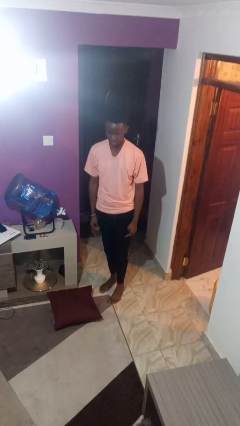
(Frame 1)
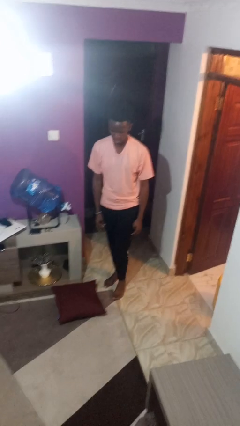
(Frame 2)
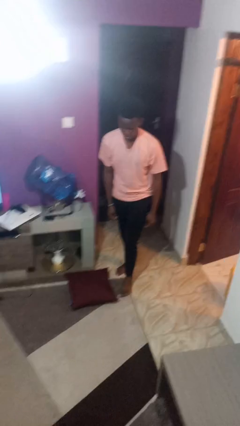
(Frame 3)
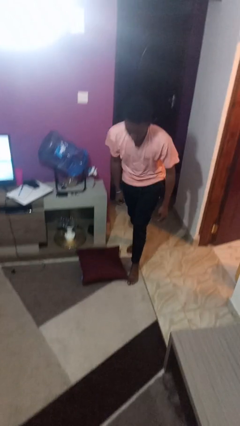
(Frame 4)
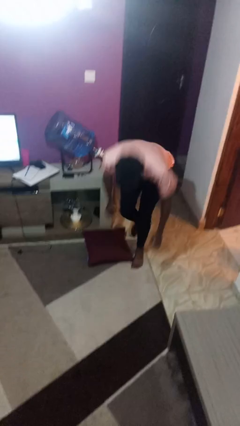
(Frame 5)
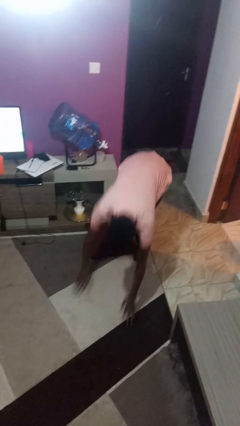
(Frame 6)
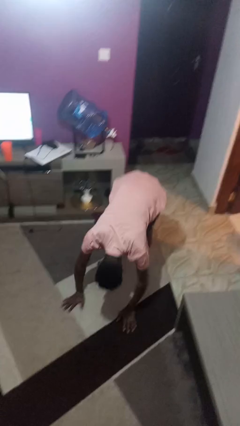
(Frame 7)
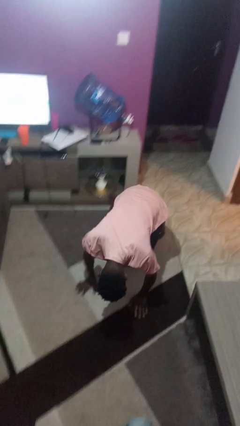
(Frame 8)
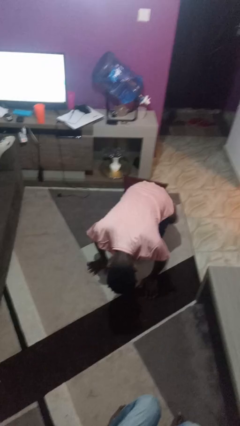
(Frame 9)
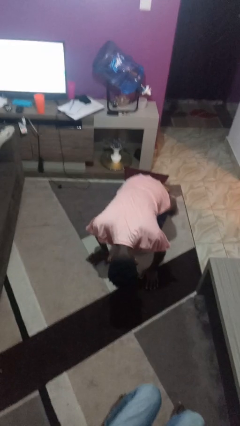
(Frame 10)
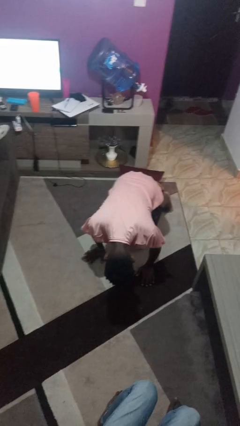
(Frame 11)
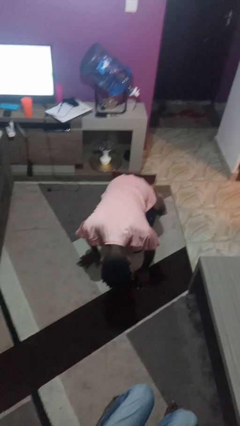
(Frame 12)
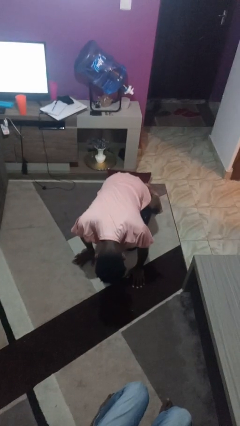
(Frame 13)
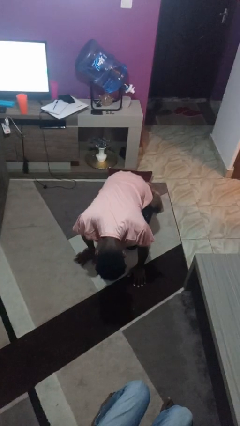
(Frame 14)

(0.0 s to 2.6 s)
person trips on object on floor

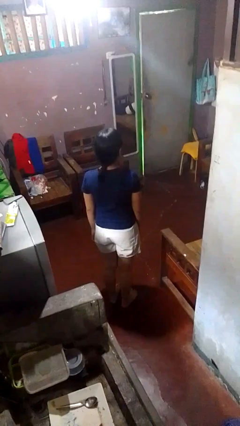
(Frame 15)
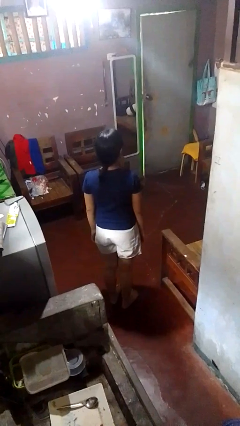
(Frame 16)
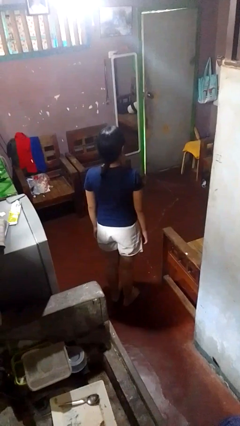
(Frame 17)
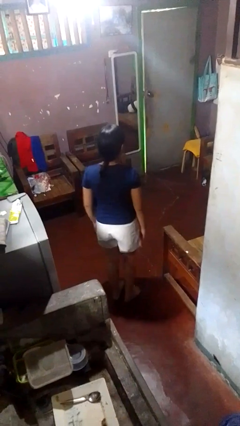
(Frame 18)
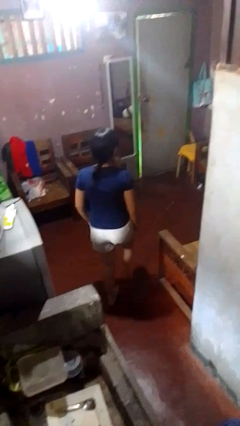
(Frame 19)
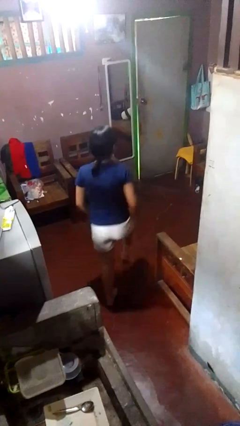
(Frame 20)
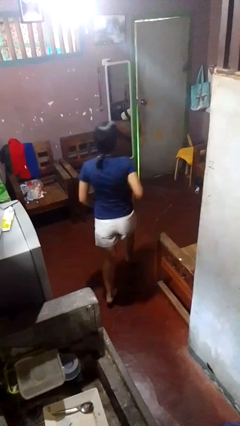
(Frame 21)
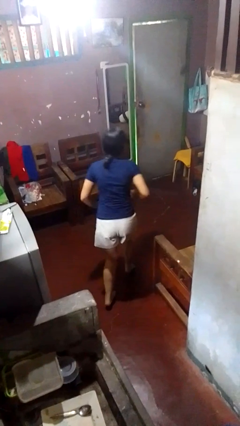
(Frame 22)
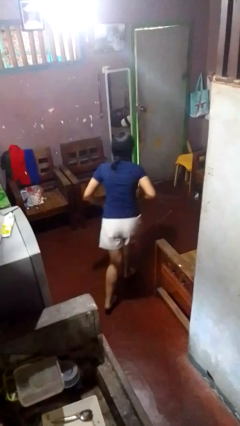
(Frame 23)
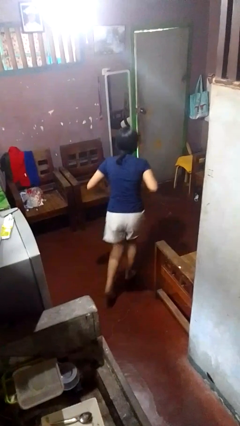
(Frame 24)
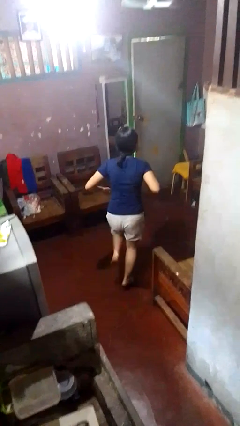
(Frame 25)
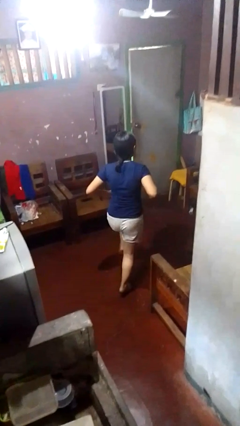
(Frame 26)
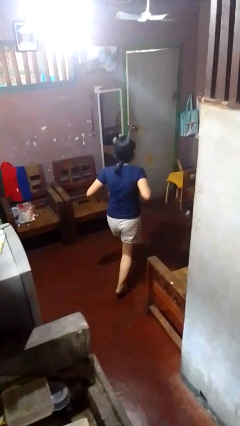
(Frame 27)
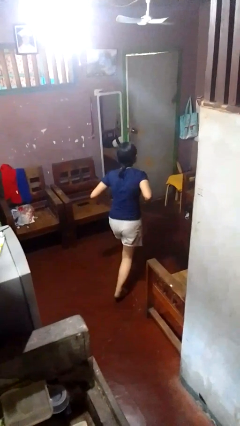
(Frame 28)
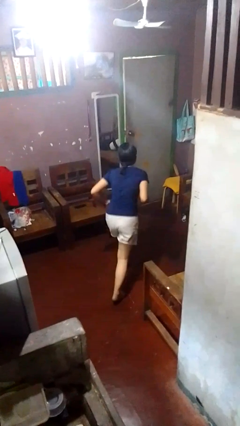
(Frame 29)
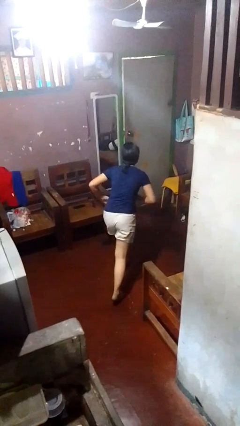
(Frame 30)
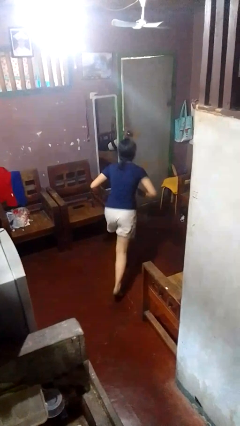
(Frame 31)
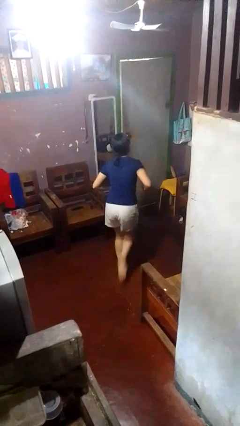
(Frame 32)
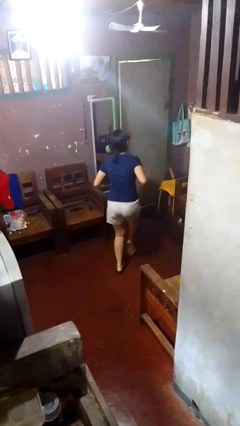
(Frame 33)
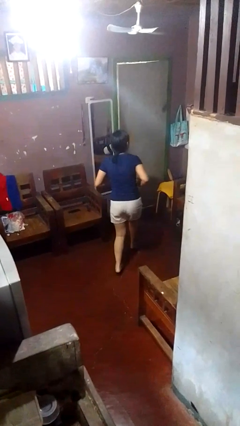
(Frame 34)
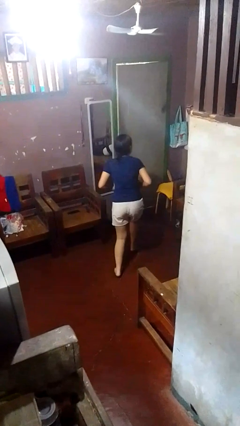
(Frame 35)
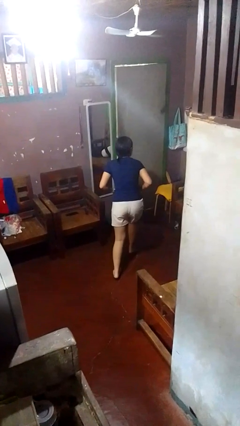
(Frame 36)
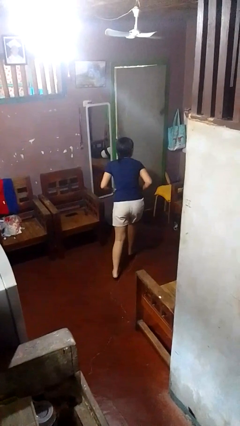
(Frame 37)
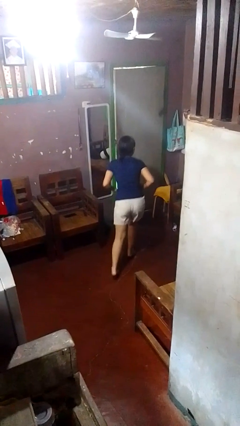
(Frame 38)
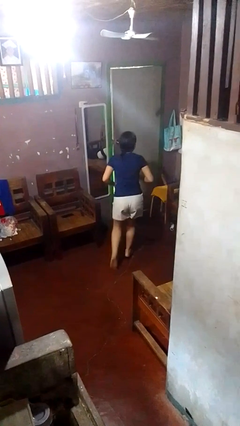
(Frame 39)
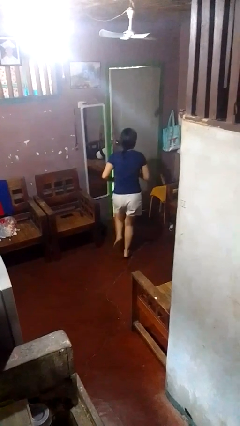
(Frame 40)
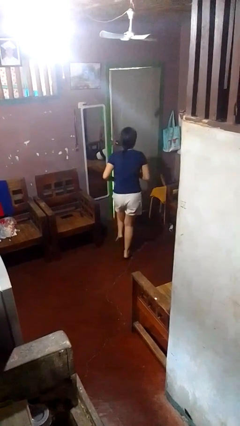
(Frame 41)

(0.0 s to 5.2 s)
person walks tiptoe

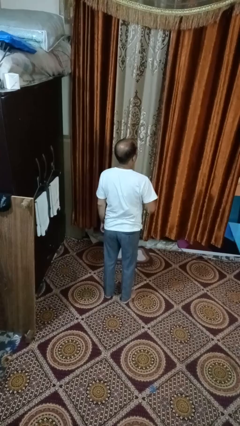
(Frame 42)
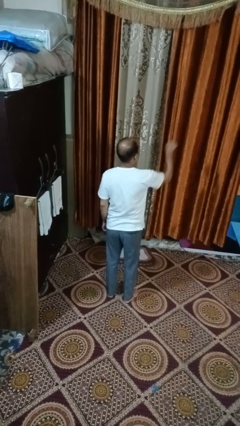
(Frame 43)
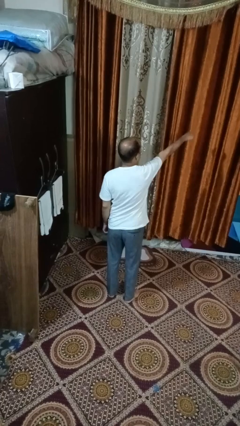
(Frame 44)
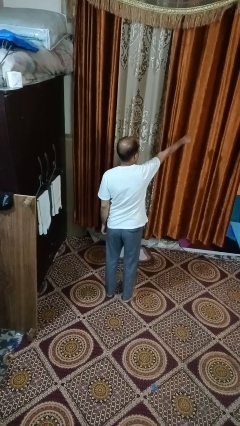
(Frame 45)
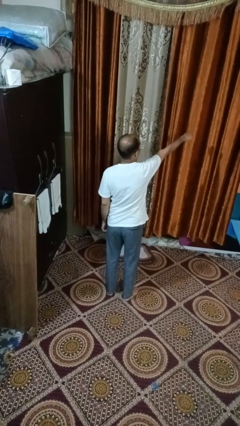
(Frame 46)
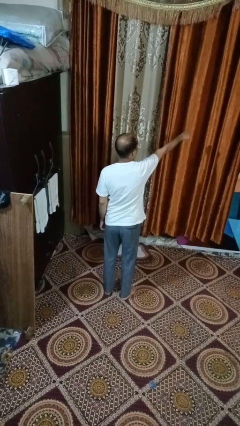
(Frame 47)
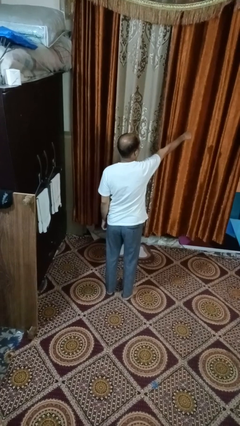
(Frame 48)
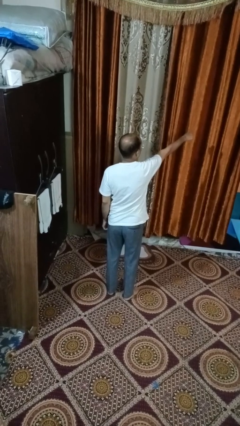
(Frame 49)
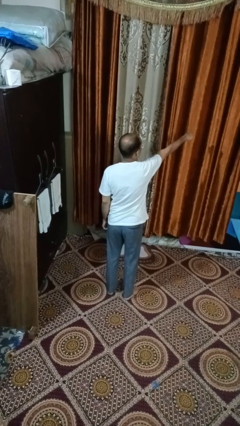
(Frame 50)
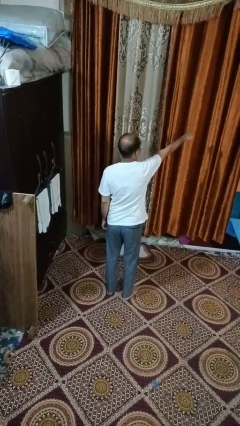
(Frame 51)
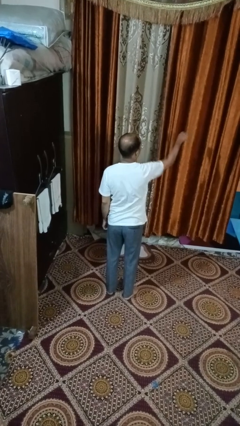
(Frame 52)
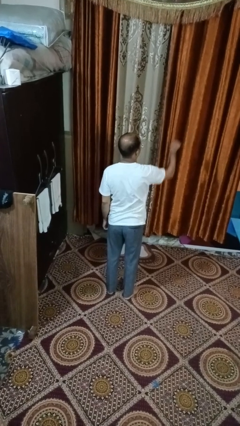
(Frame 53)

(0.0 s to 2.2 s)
person punches

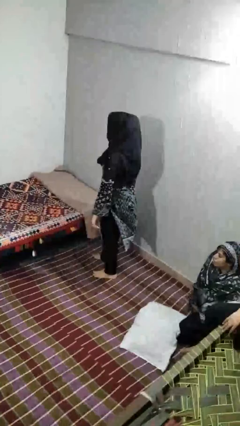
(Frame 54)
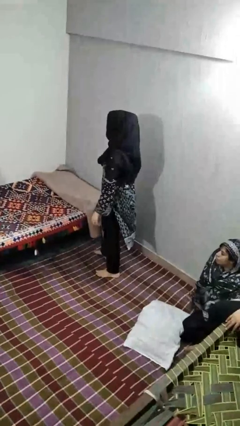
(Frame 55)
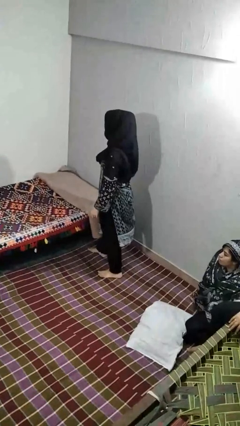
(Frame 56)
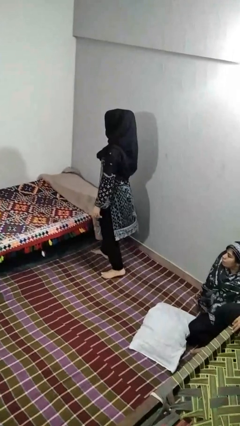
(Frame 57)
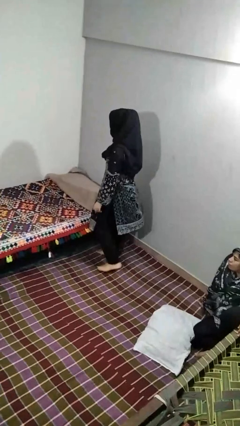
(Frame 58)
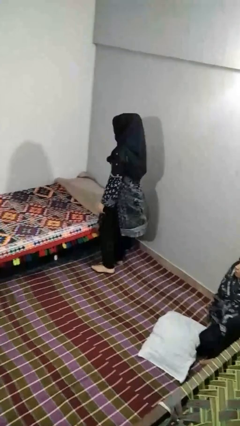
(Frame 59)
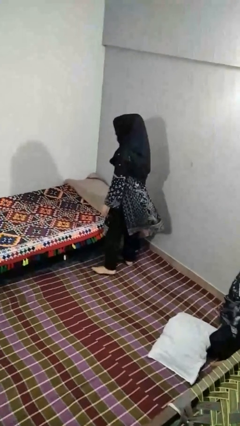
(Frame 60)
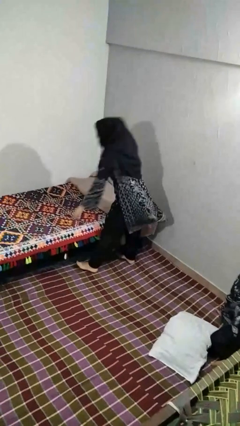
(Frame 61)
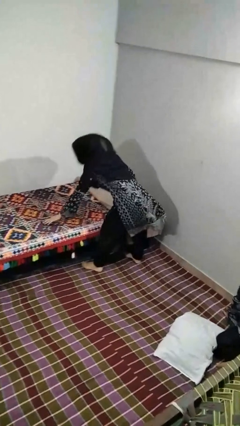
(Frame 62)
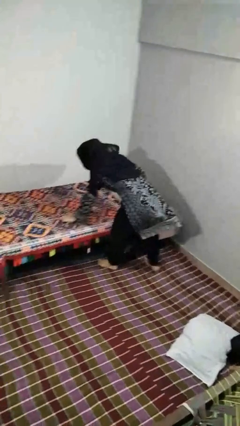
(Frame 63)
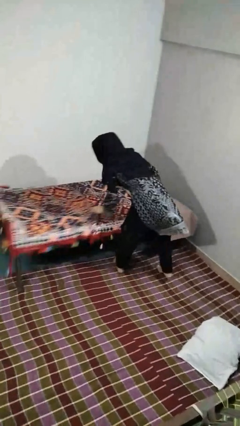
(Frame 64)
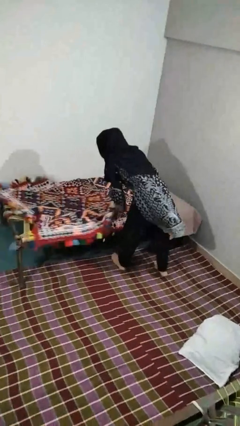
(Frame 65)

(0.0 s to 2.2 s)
person makes bed

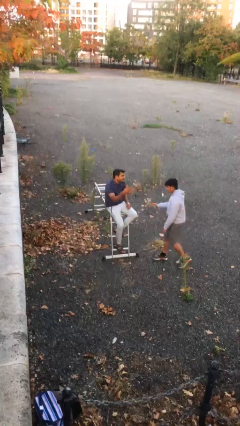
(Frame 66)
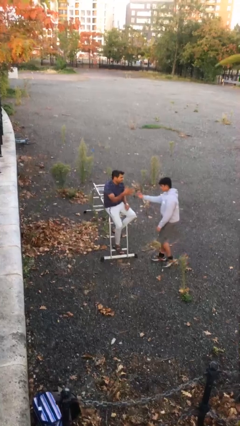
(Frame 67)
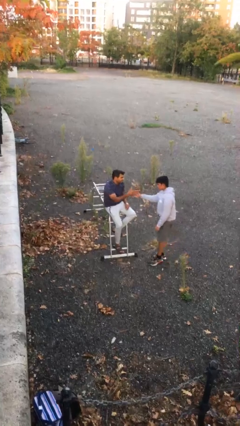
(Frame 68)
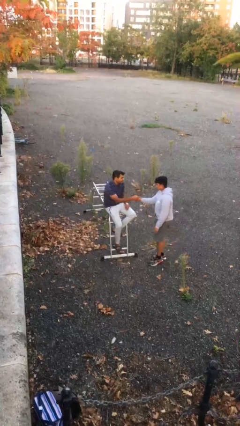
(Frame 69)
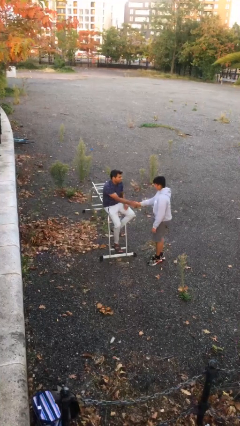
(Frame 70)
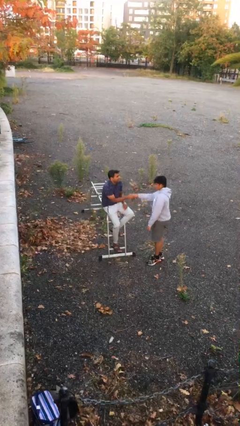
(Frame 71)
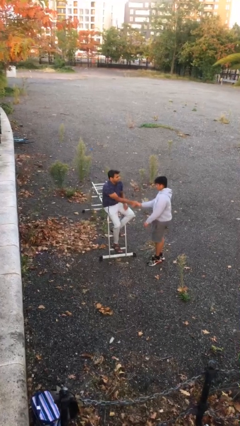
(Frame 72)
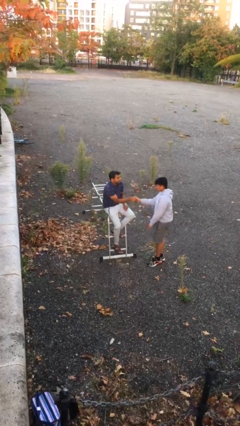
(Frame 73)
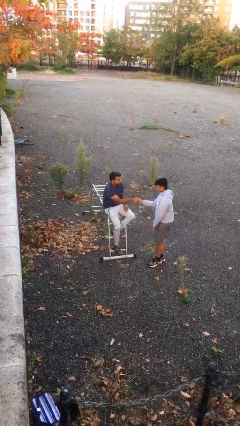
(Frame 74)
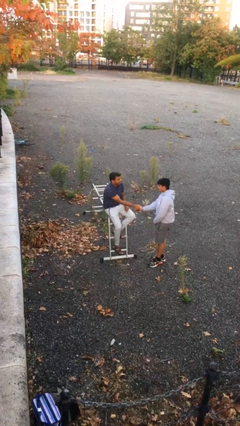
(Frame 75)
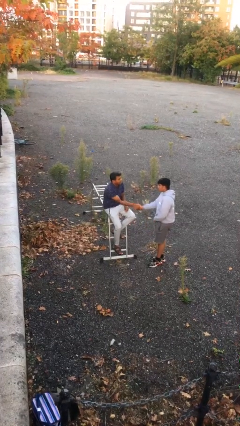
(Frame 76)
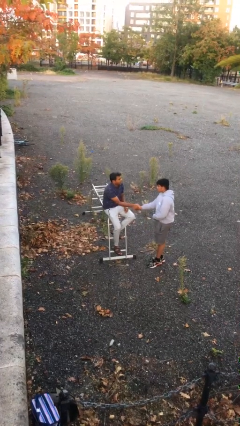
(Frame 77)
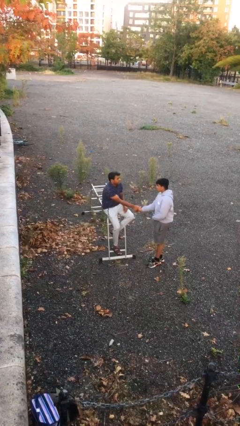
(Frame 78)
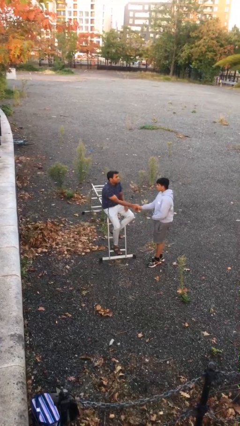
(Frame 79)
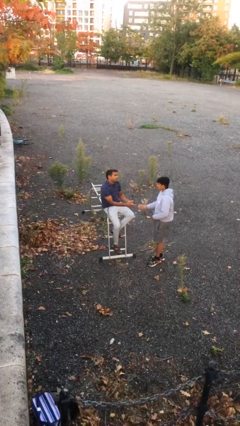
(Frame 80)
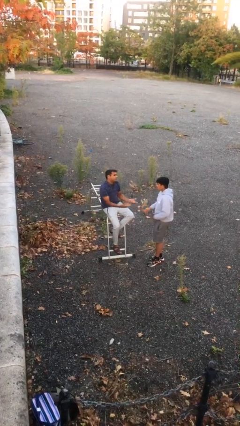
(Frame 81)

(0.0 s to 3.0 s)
person shakes hand

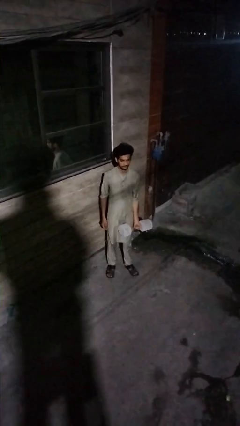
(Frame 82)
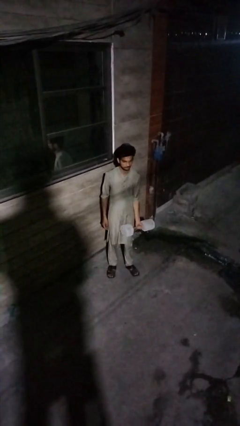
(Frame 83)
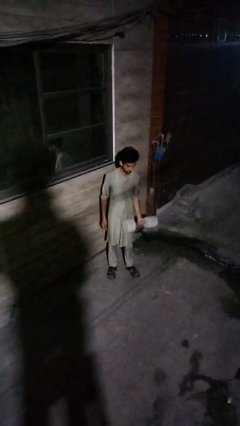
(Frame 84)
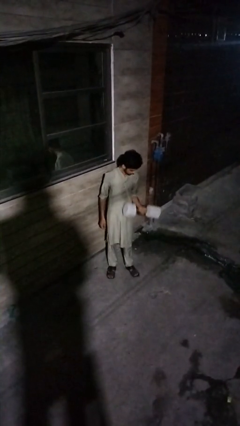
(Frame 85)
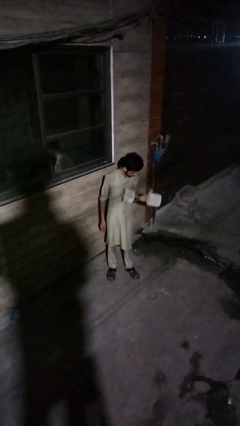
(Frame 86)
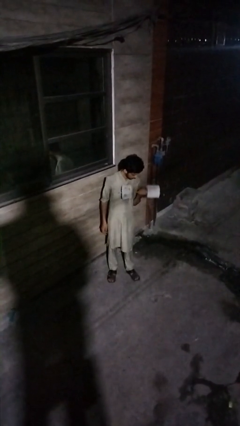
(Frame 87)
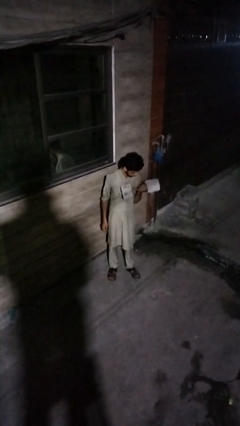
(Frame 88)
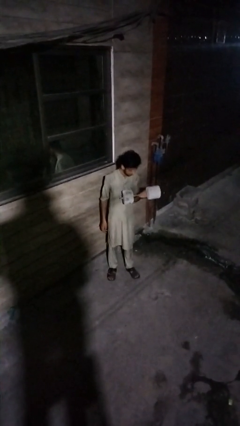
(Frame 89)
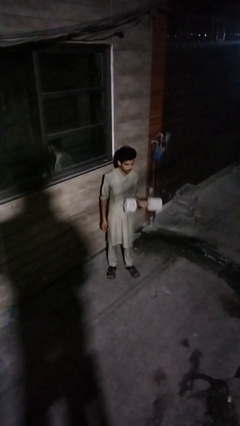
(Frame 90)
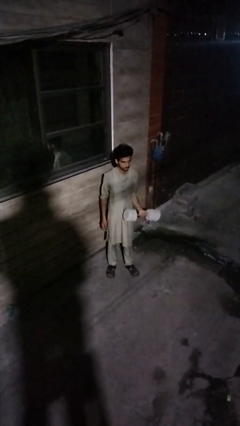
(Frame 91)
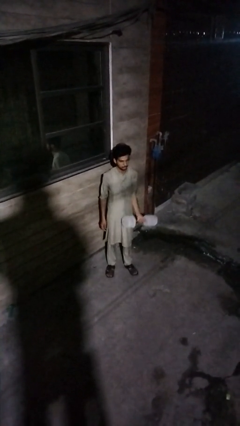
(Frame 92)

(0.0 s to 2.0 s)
person lifts dumbbells

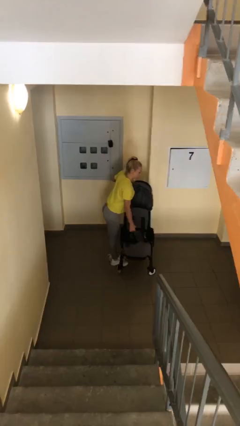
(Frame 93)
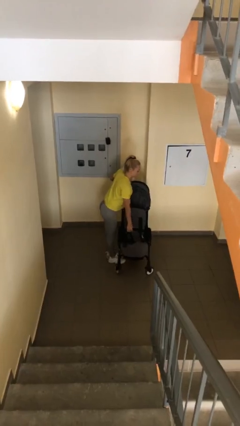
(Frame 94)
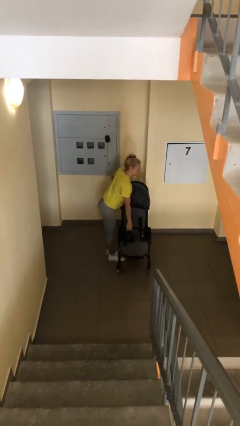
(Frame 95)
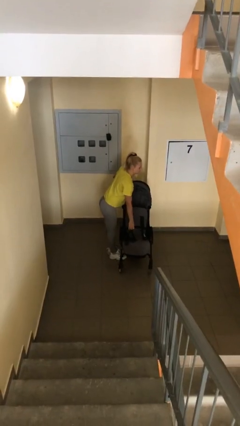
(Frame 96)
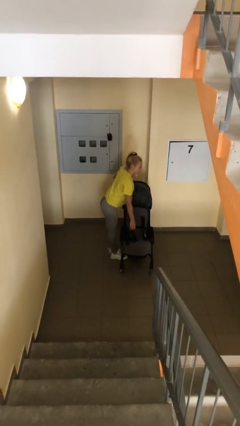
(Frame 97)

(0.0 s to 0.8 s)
person puts down object on floor
